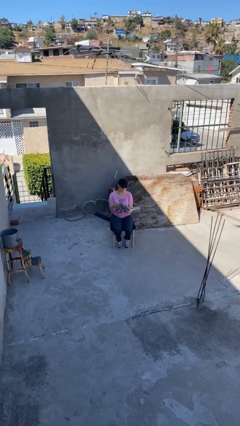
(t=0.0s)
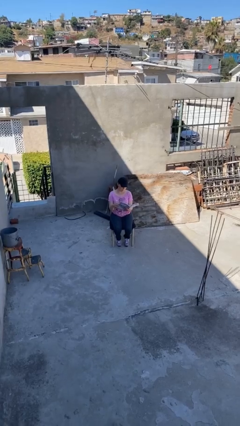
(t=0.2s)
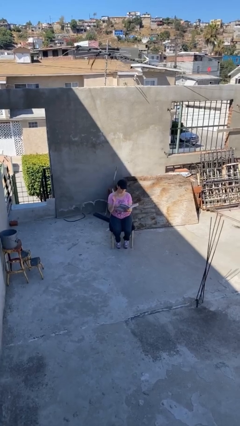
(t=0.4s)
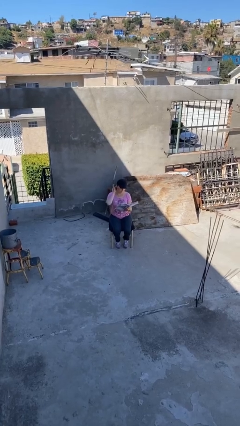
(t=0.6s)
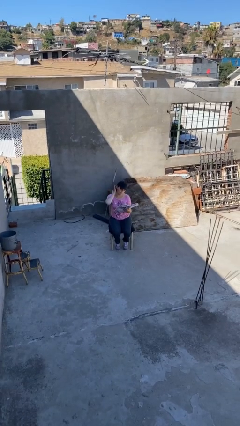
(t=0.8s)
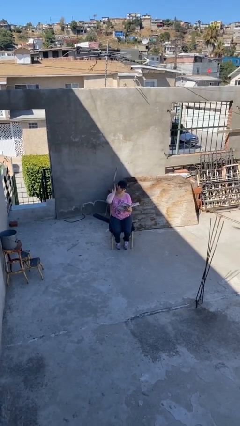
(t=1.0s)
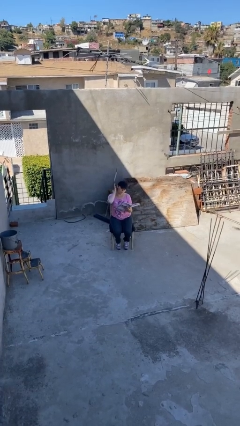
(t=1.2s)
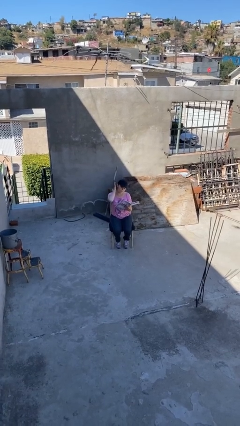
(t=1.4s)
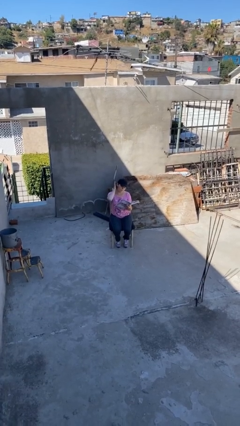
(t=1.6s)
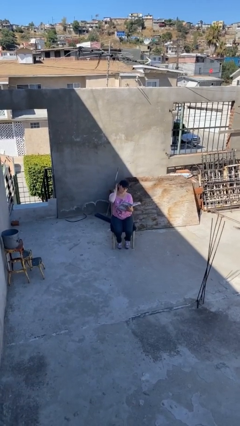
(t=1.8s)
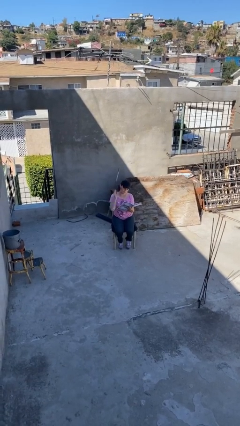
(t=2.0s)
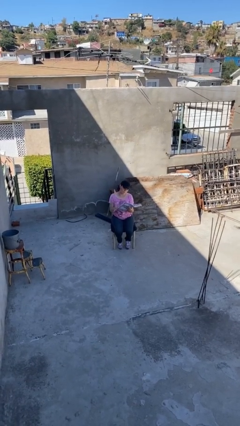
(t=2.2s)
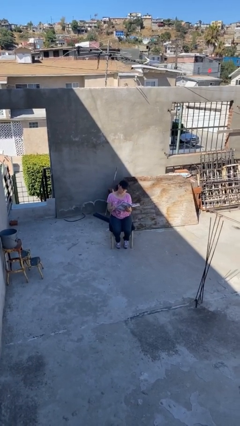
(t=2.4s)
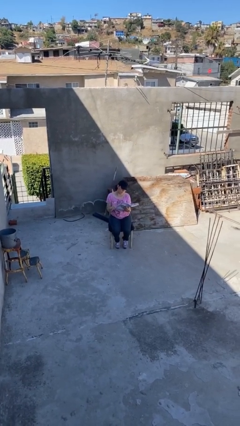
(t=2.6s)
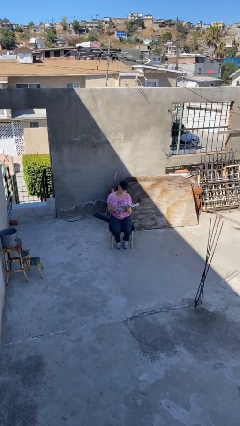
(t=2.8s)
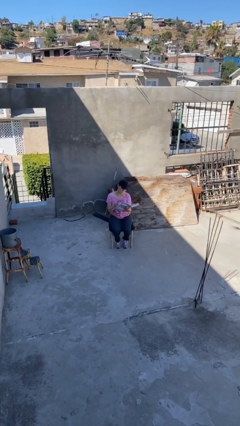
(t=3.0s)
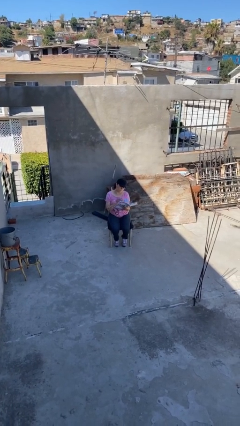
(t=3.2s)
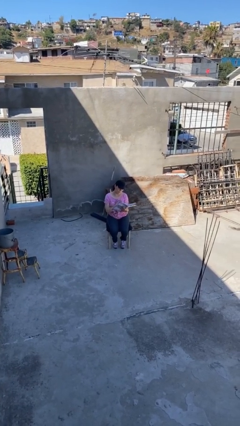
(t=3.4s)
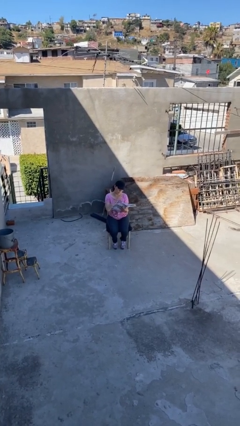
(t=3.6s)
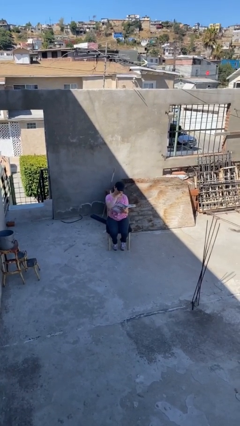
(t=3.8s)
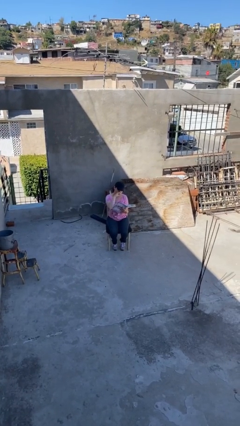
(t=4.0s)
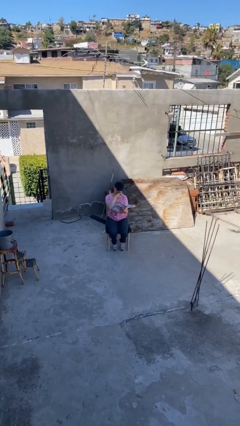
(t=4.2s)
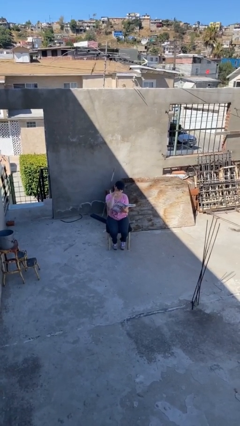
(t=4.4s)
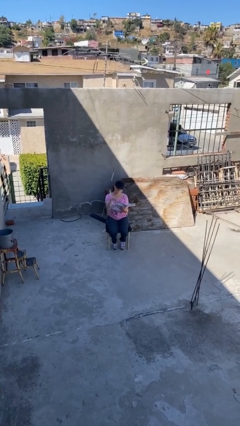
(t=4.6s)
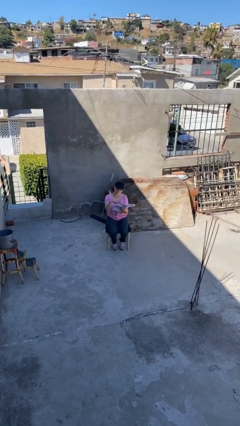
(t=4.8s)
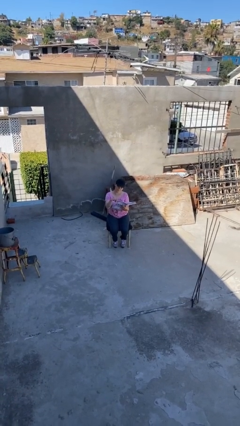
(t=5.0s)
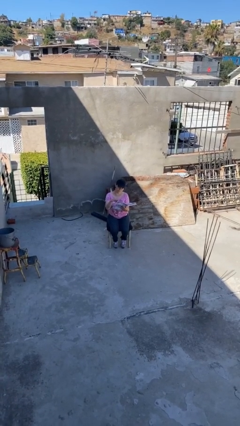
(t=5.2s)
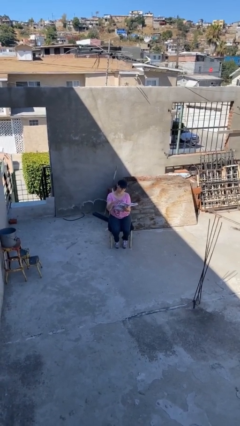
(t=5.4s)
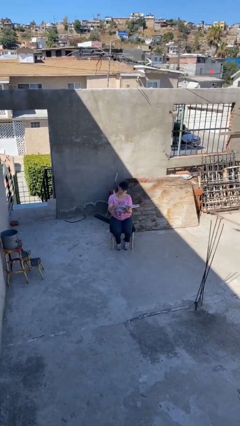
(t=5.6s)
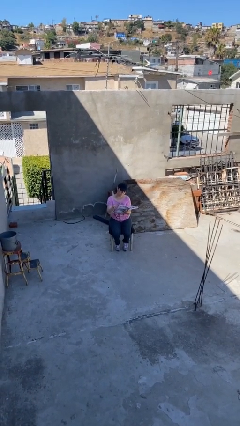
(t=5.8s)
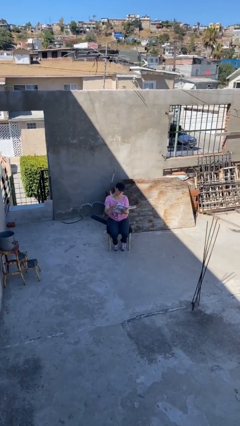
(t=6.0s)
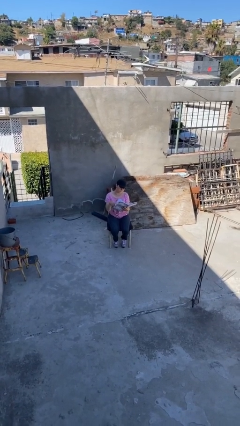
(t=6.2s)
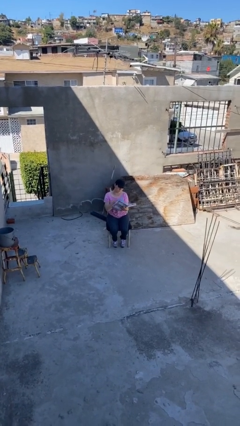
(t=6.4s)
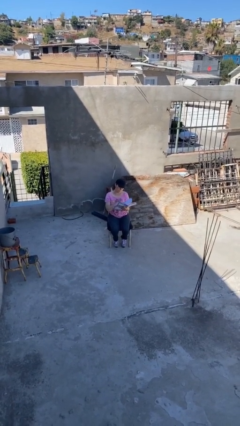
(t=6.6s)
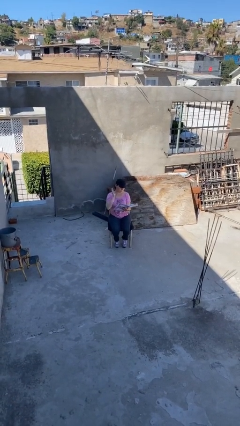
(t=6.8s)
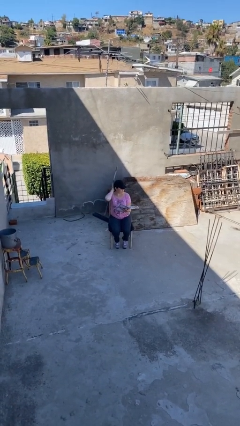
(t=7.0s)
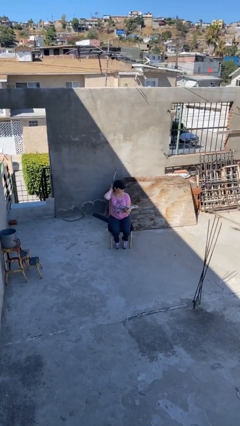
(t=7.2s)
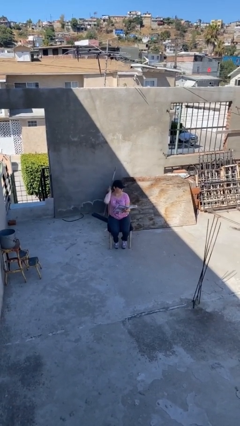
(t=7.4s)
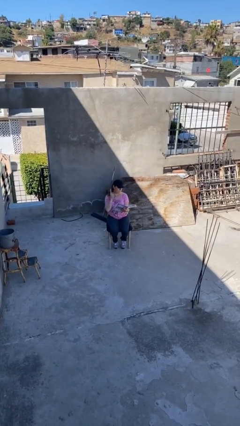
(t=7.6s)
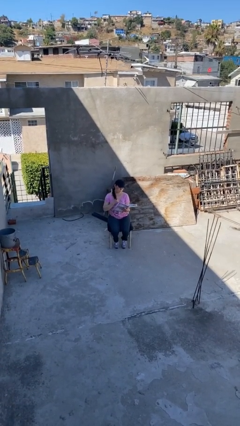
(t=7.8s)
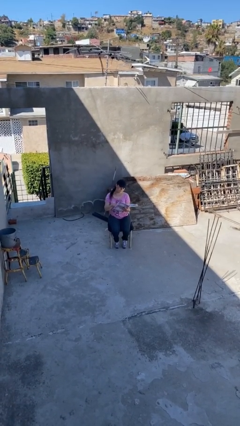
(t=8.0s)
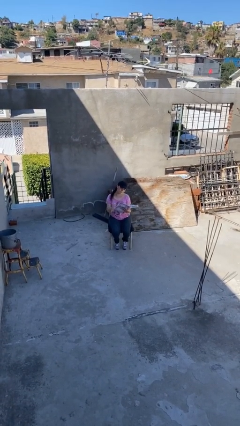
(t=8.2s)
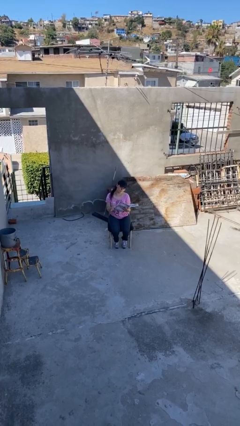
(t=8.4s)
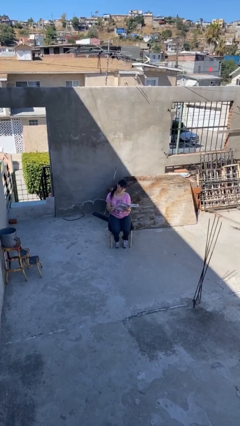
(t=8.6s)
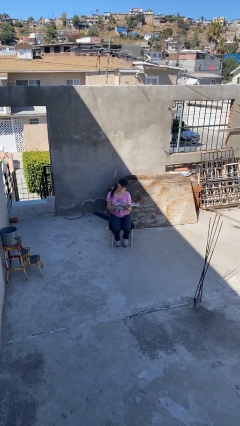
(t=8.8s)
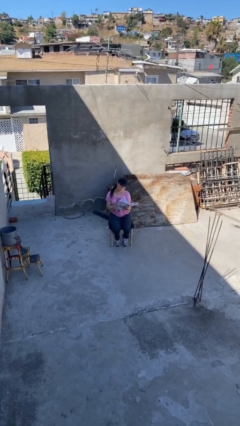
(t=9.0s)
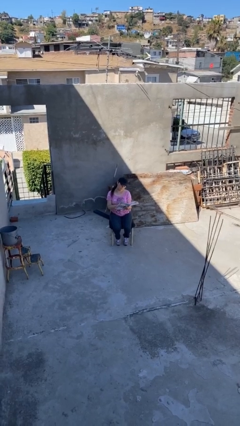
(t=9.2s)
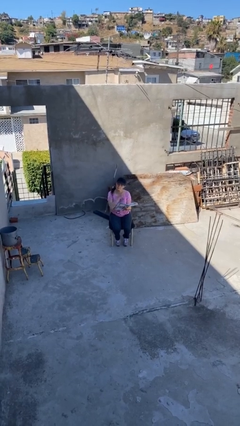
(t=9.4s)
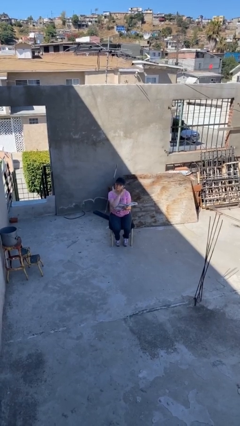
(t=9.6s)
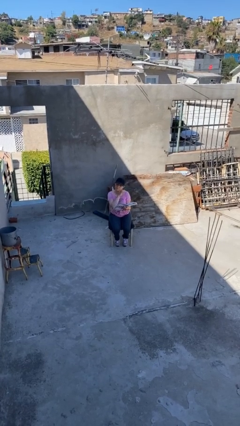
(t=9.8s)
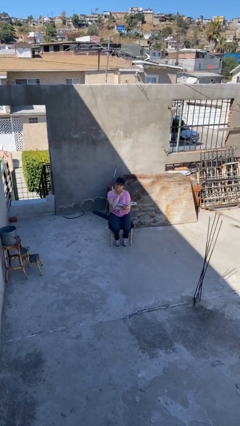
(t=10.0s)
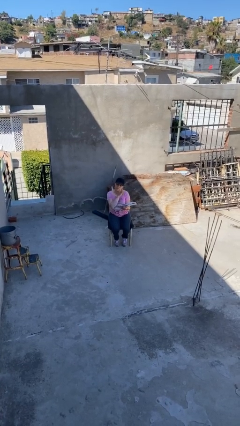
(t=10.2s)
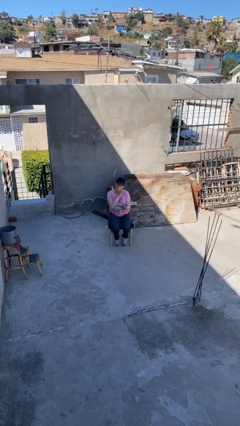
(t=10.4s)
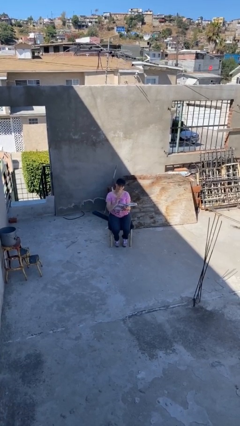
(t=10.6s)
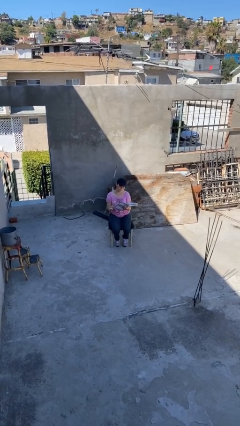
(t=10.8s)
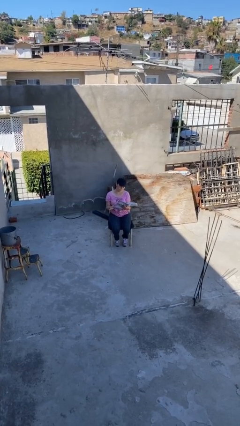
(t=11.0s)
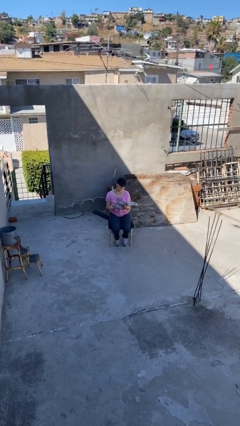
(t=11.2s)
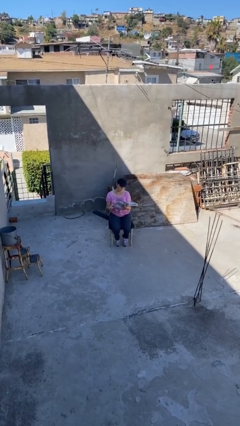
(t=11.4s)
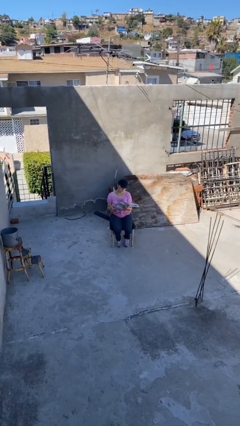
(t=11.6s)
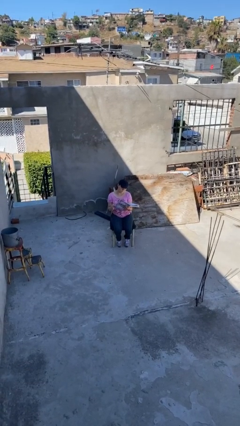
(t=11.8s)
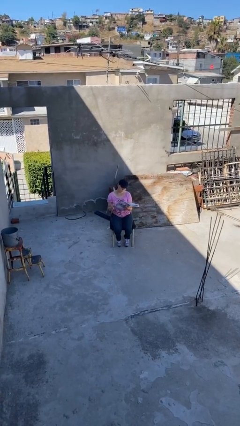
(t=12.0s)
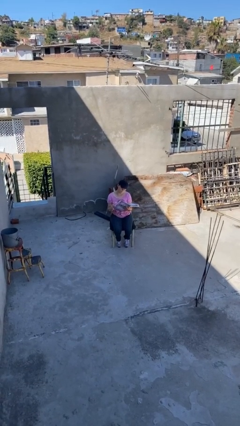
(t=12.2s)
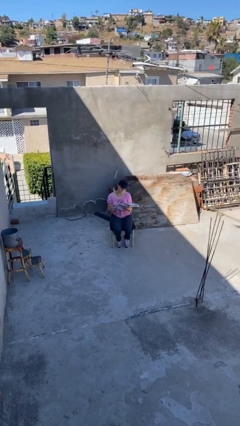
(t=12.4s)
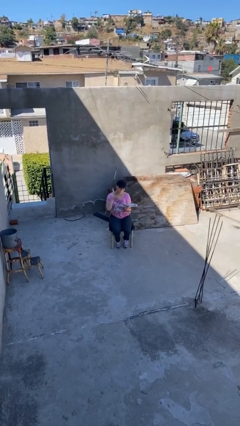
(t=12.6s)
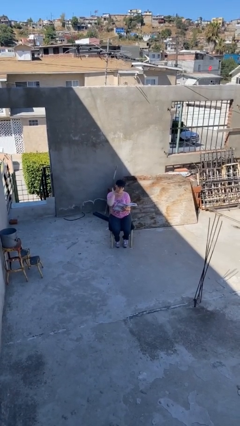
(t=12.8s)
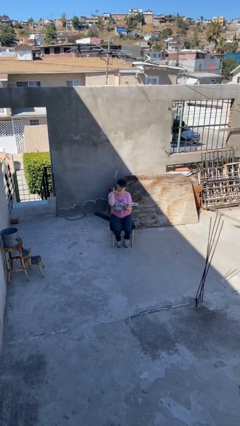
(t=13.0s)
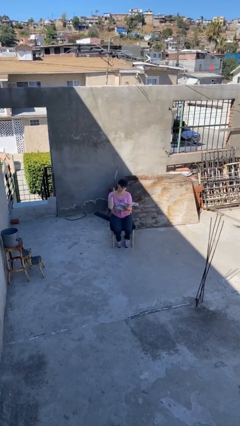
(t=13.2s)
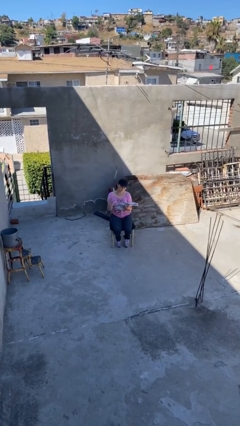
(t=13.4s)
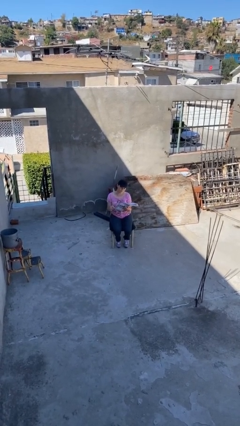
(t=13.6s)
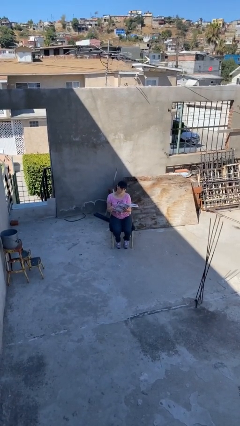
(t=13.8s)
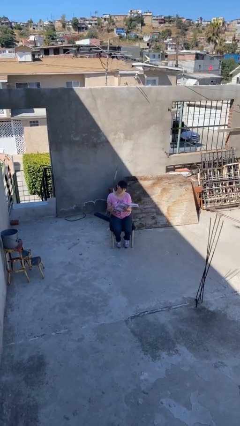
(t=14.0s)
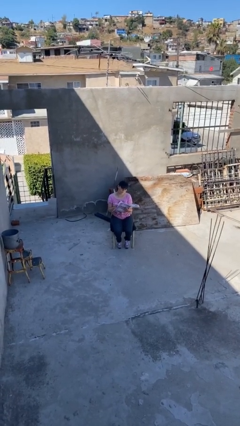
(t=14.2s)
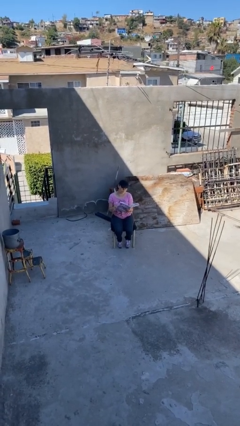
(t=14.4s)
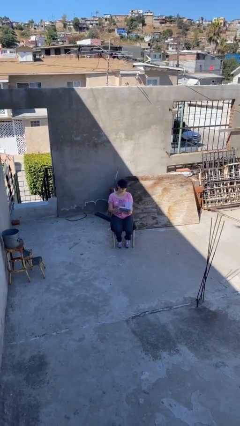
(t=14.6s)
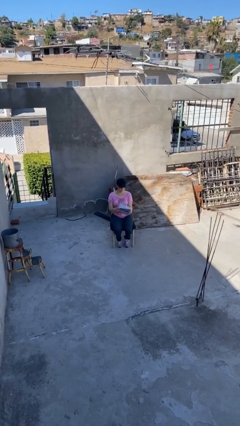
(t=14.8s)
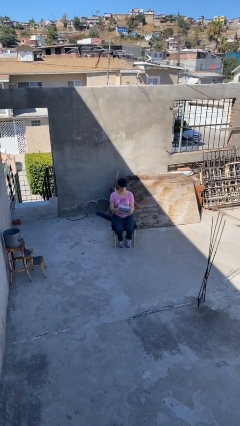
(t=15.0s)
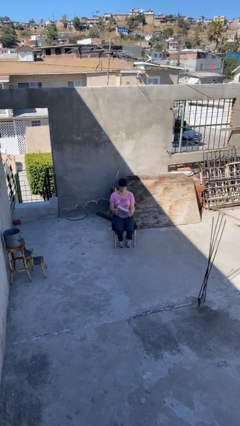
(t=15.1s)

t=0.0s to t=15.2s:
person reads document

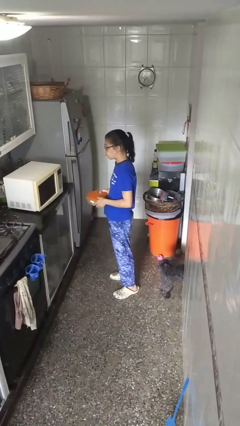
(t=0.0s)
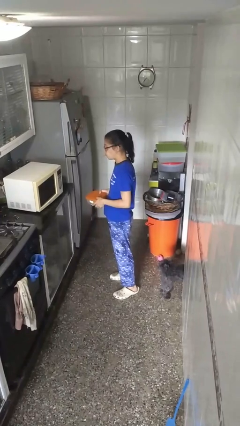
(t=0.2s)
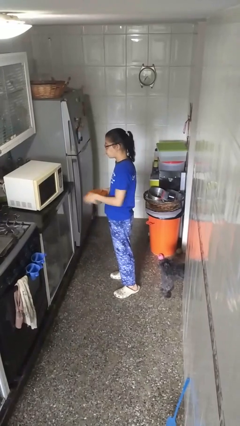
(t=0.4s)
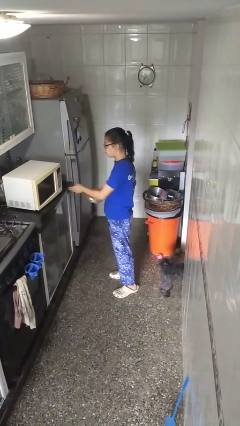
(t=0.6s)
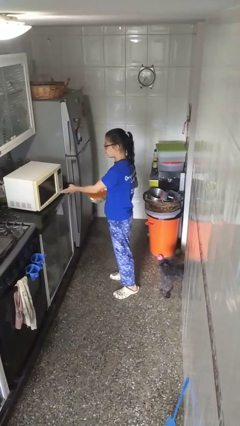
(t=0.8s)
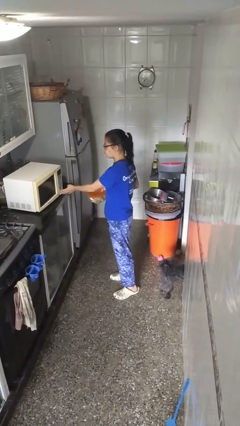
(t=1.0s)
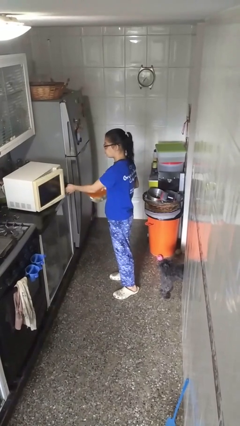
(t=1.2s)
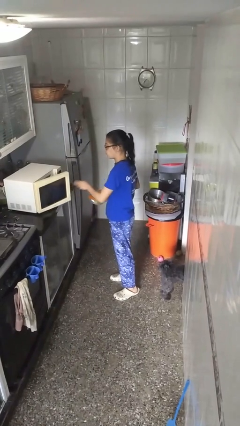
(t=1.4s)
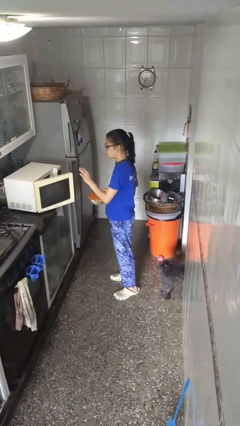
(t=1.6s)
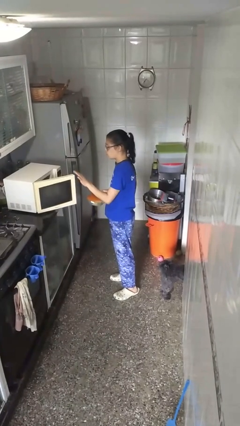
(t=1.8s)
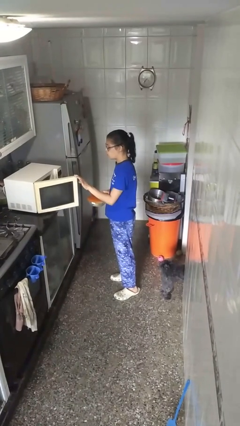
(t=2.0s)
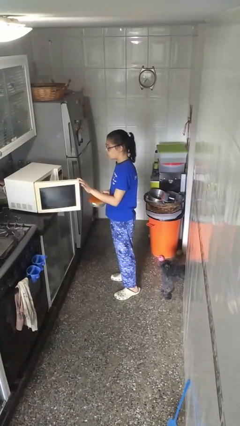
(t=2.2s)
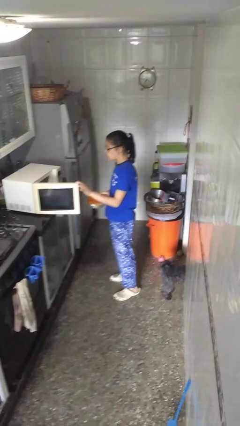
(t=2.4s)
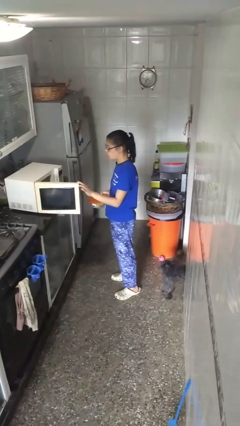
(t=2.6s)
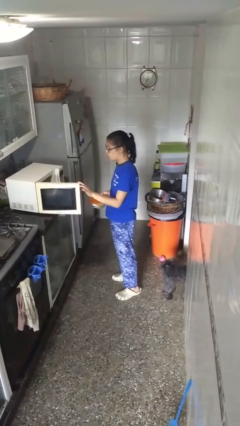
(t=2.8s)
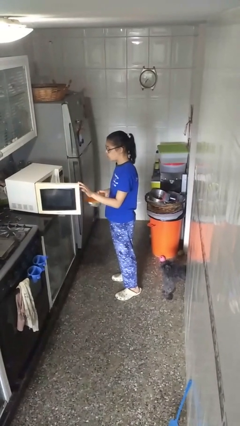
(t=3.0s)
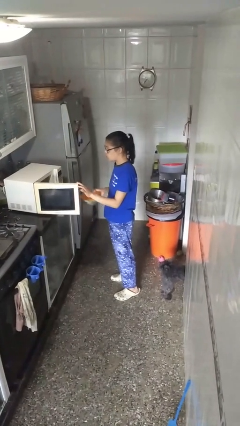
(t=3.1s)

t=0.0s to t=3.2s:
person opens microwave
